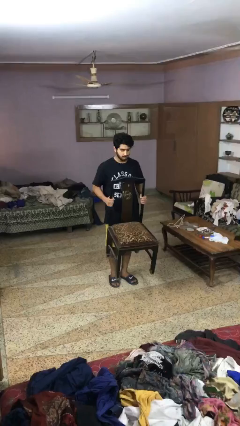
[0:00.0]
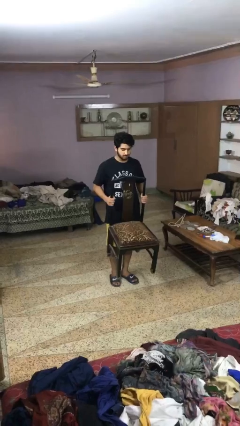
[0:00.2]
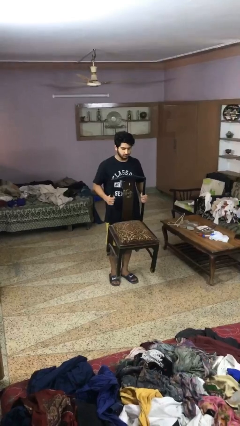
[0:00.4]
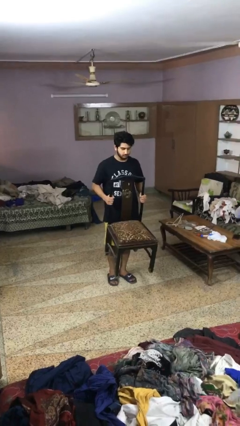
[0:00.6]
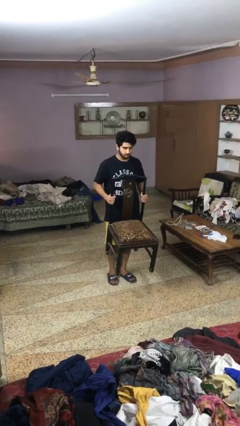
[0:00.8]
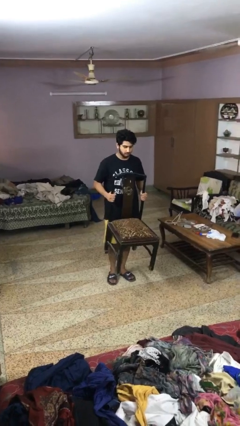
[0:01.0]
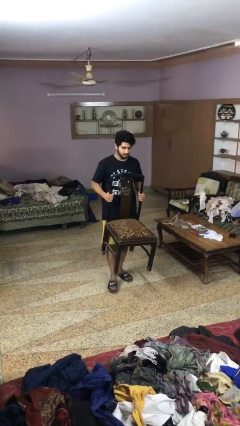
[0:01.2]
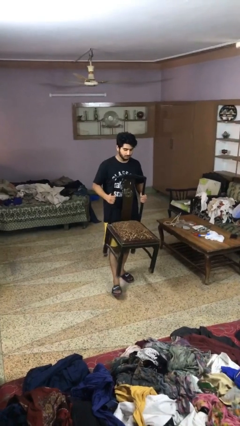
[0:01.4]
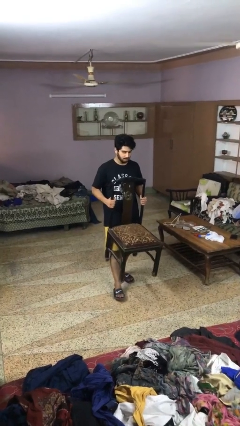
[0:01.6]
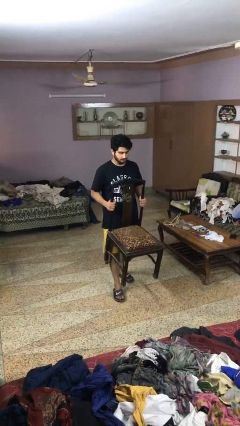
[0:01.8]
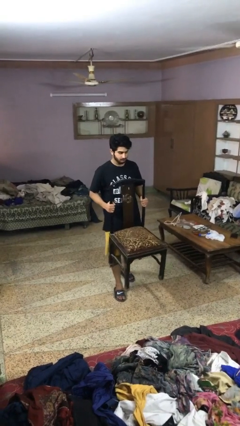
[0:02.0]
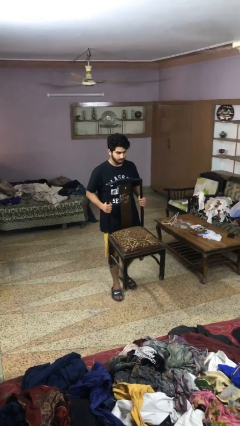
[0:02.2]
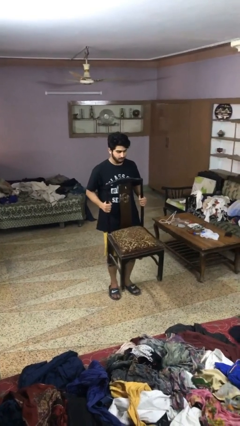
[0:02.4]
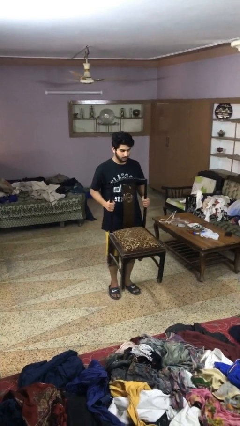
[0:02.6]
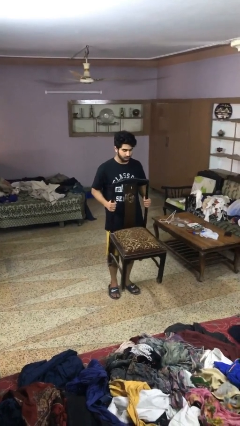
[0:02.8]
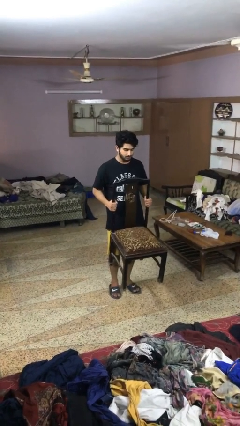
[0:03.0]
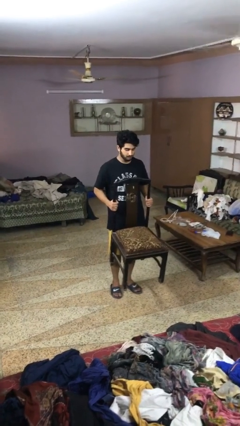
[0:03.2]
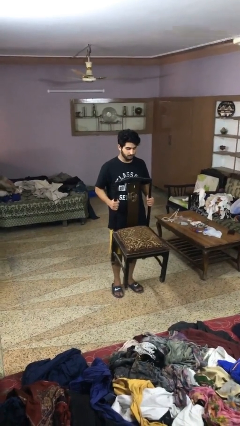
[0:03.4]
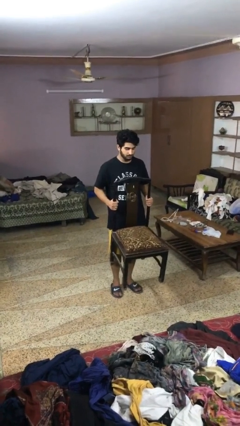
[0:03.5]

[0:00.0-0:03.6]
person carries furniture

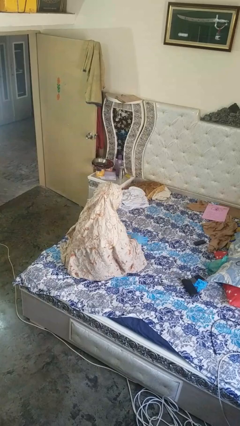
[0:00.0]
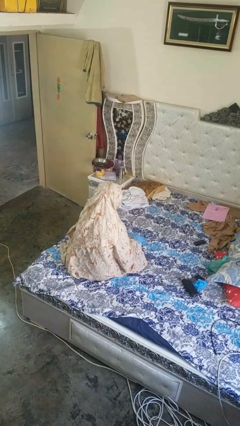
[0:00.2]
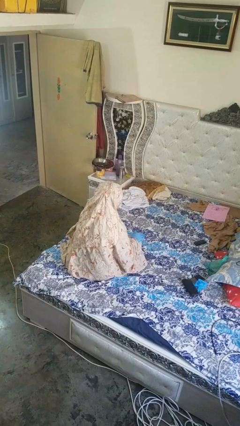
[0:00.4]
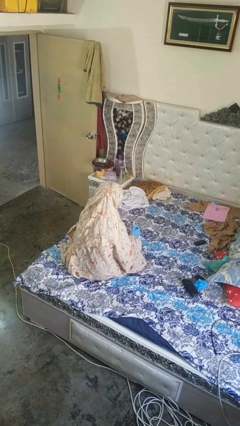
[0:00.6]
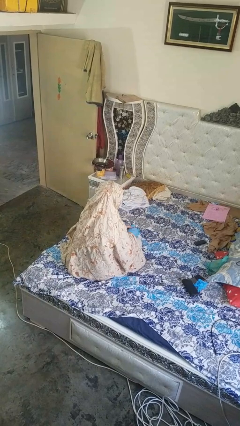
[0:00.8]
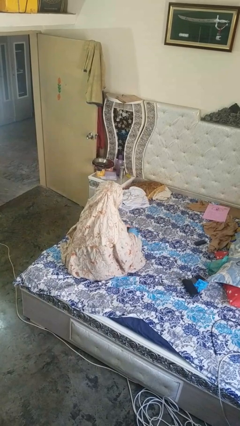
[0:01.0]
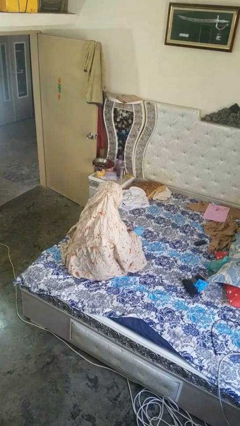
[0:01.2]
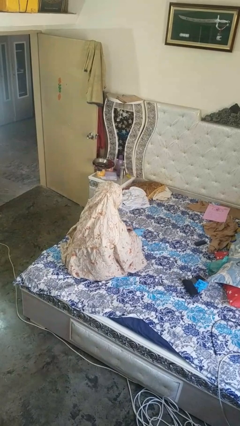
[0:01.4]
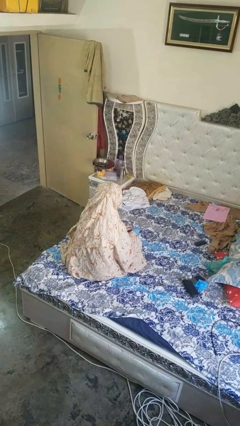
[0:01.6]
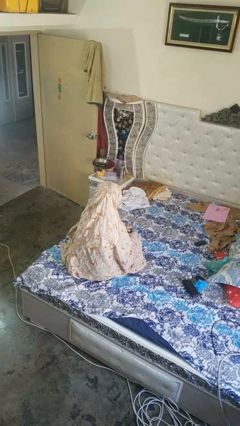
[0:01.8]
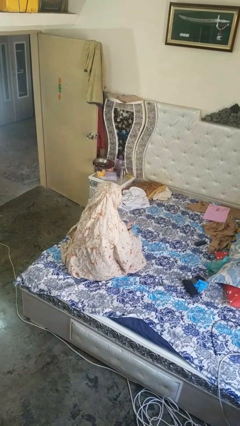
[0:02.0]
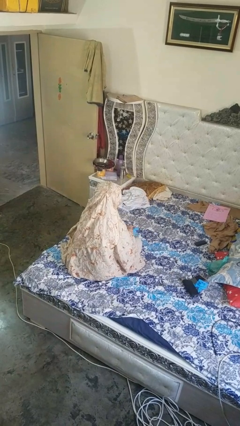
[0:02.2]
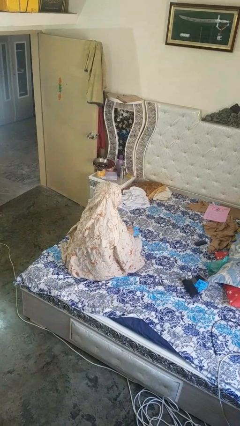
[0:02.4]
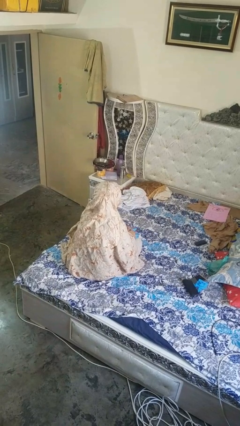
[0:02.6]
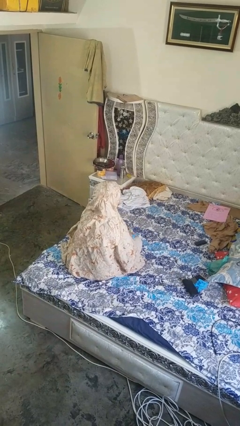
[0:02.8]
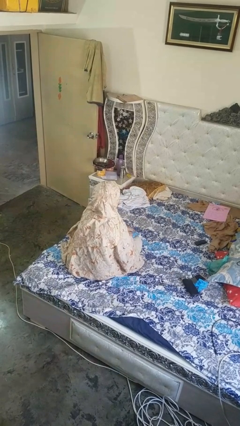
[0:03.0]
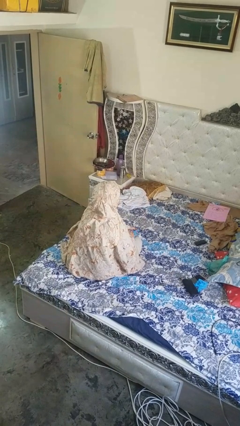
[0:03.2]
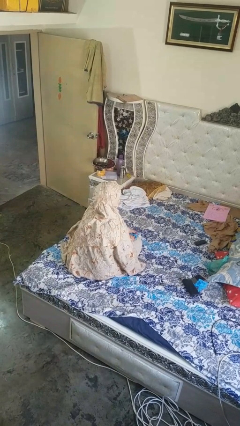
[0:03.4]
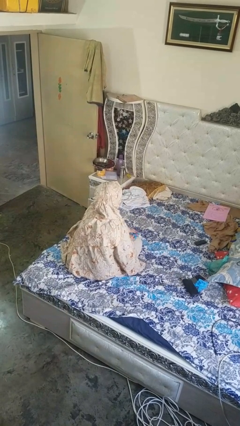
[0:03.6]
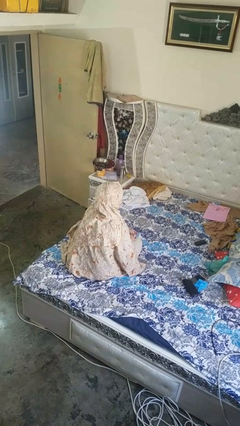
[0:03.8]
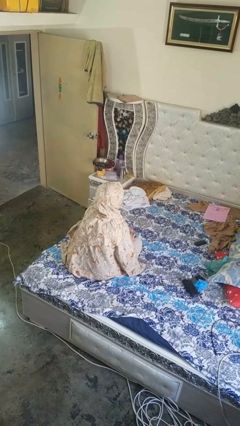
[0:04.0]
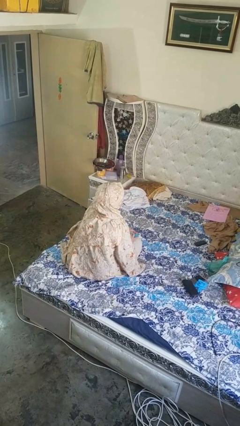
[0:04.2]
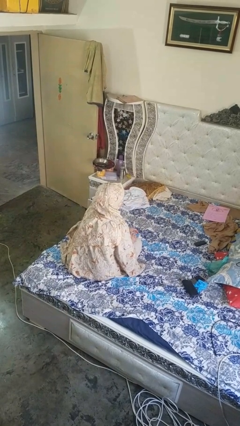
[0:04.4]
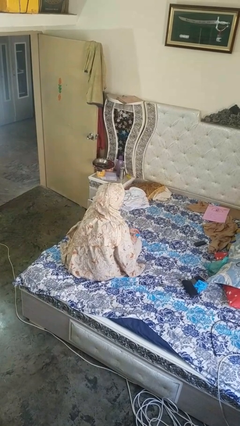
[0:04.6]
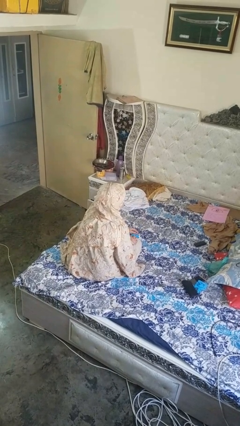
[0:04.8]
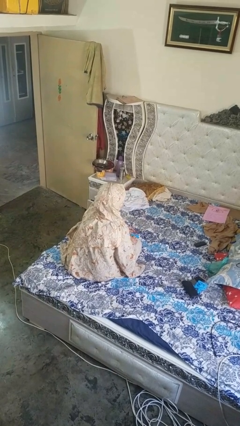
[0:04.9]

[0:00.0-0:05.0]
person takes off gloves

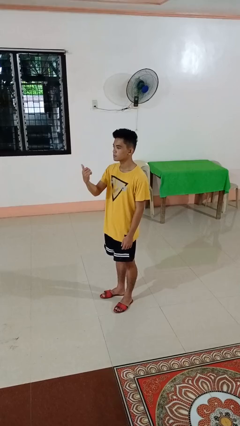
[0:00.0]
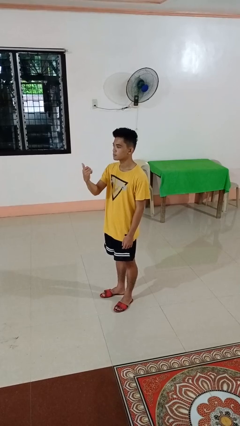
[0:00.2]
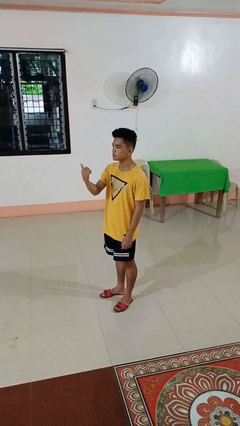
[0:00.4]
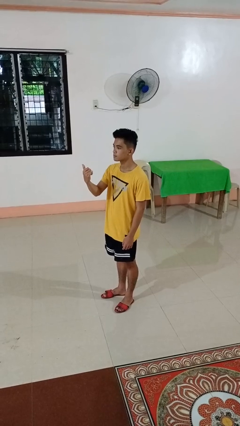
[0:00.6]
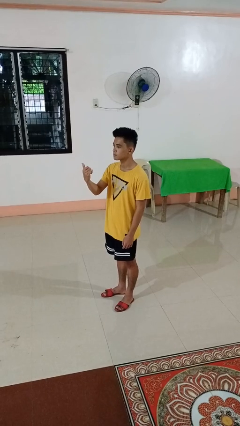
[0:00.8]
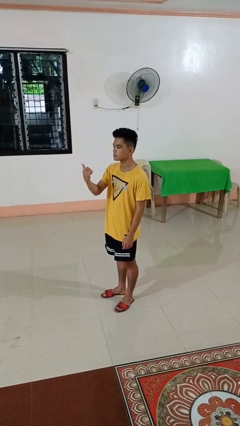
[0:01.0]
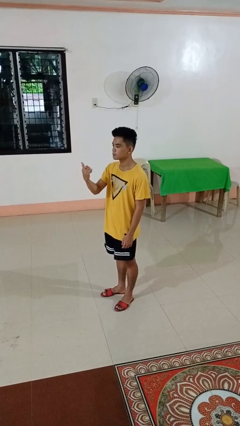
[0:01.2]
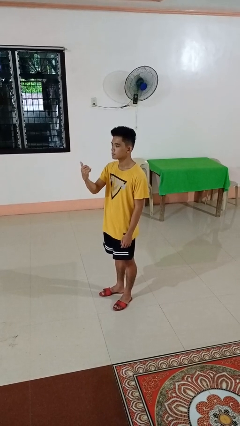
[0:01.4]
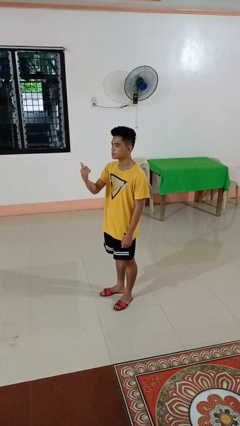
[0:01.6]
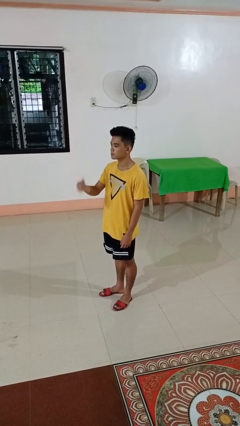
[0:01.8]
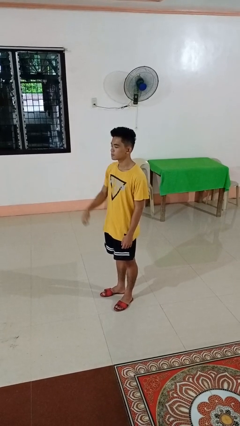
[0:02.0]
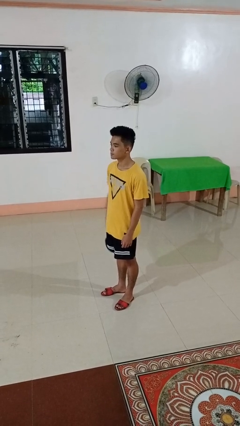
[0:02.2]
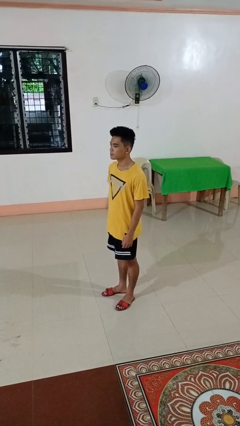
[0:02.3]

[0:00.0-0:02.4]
person gestures hang loose

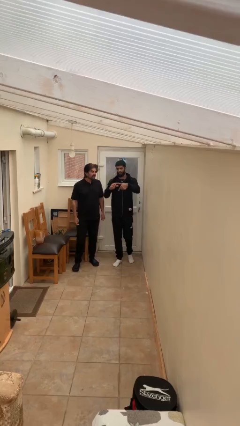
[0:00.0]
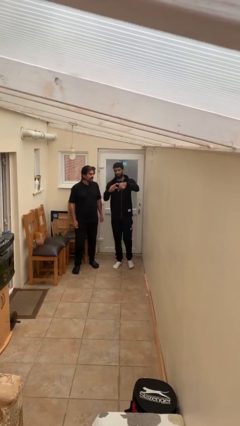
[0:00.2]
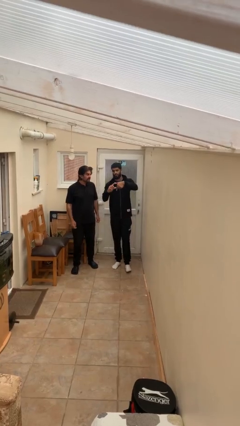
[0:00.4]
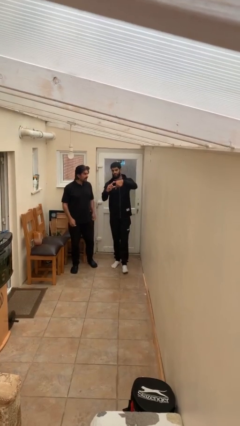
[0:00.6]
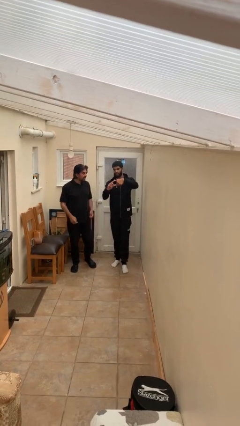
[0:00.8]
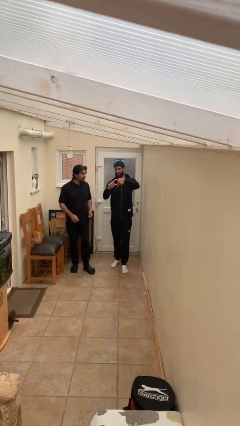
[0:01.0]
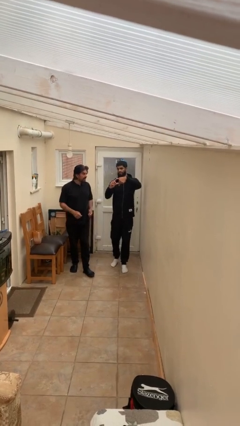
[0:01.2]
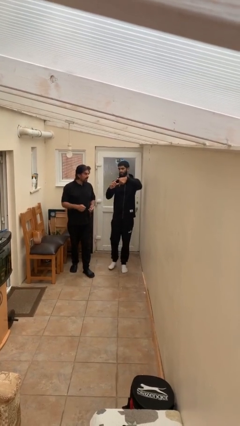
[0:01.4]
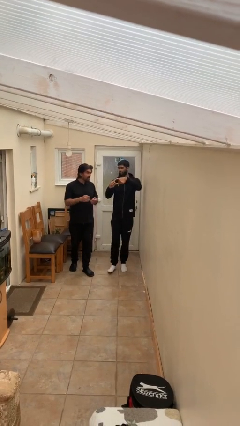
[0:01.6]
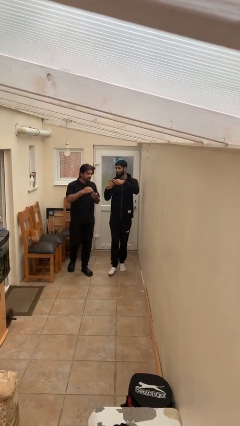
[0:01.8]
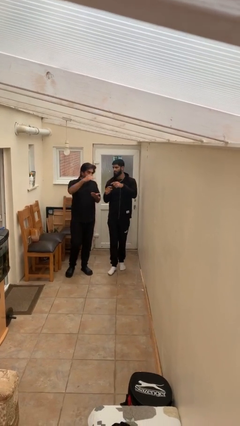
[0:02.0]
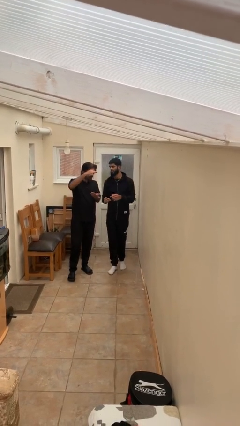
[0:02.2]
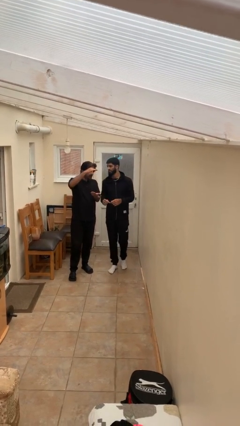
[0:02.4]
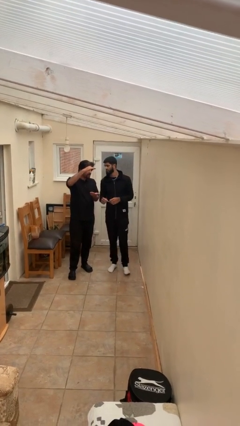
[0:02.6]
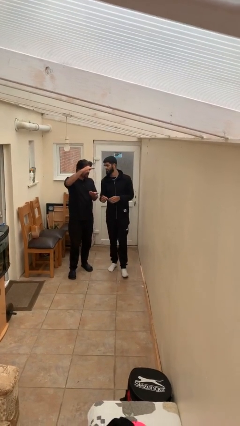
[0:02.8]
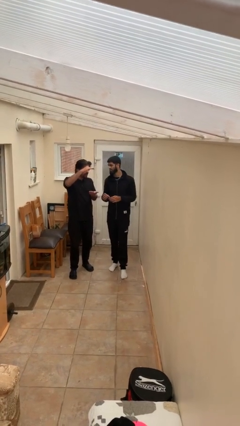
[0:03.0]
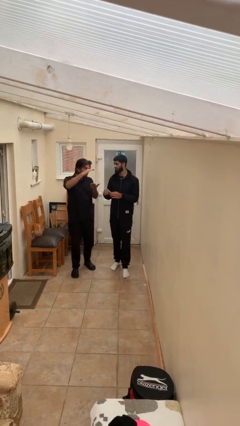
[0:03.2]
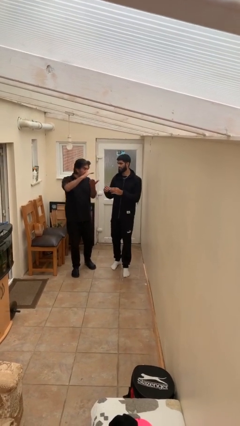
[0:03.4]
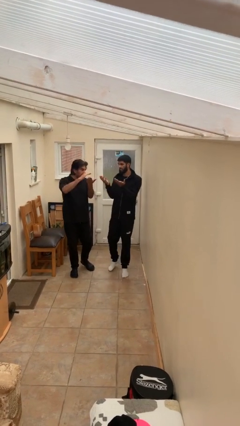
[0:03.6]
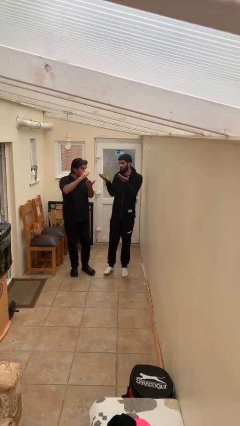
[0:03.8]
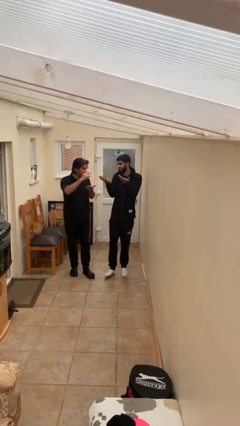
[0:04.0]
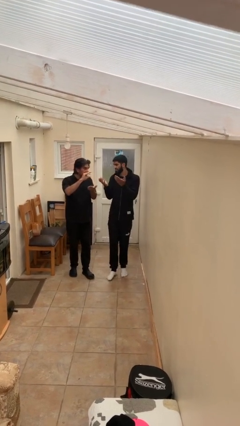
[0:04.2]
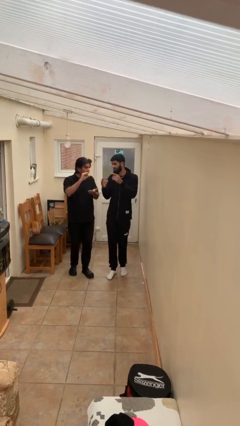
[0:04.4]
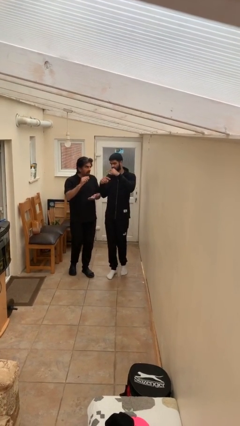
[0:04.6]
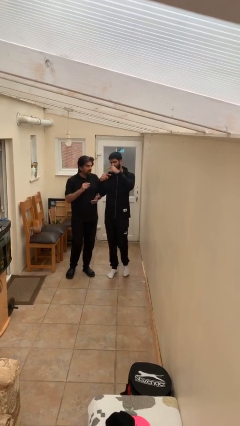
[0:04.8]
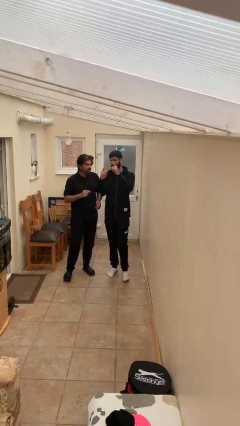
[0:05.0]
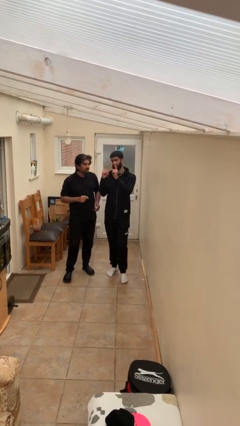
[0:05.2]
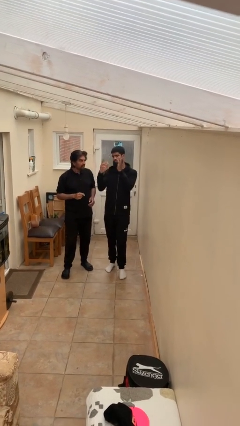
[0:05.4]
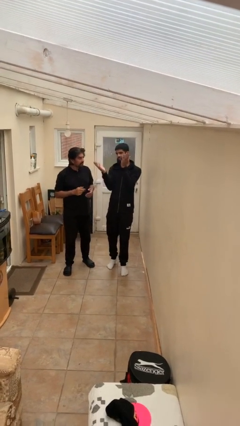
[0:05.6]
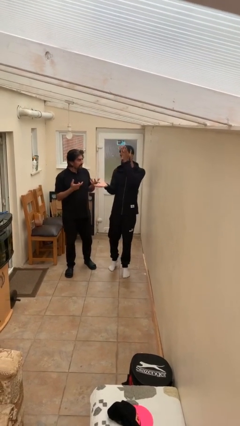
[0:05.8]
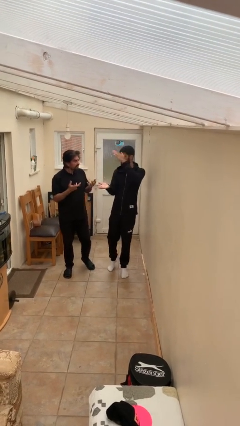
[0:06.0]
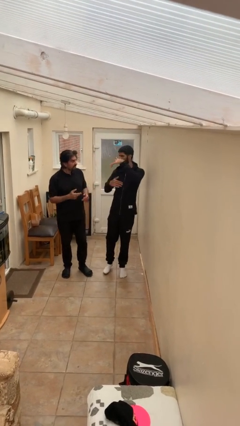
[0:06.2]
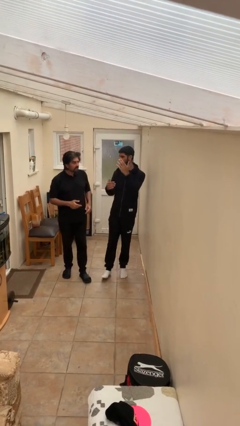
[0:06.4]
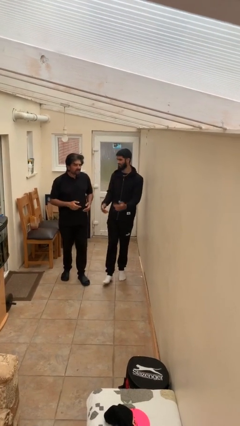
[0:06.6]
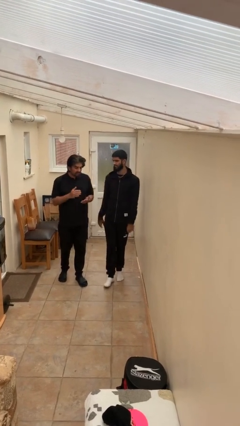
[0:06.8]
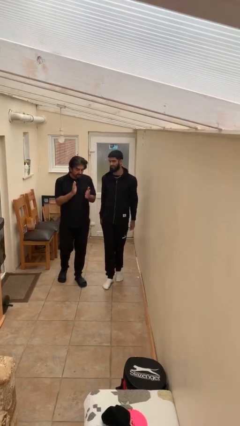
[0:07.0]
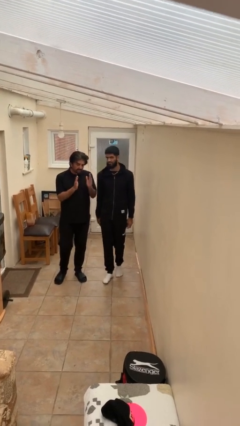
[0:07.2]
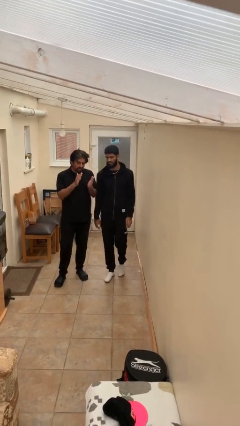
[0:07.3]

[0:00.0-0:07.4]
person talks to person
